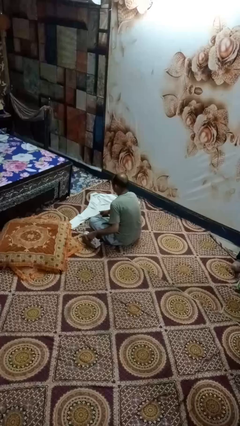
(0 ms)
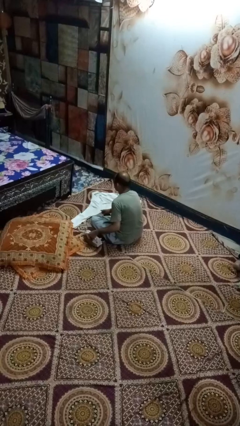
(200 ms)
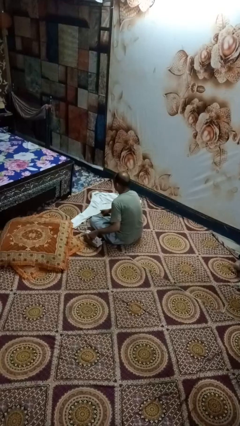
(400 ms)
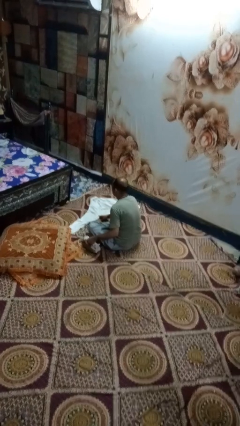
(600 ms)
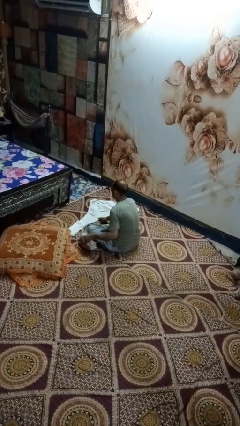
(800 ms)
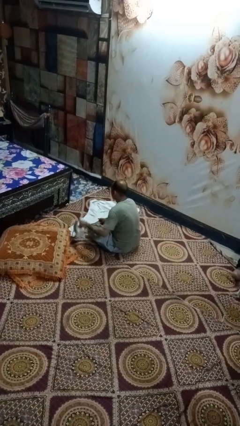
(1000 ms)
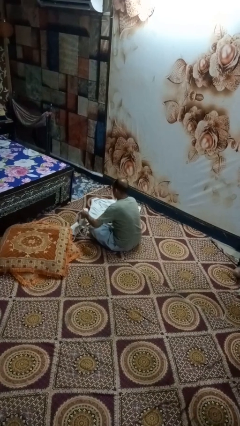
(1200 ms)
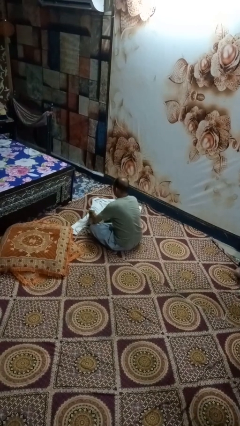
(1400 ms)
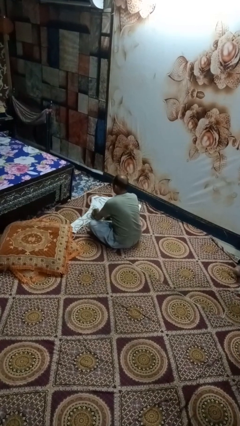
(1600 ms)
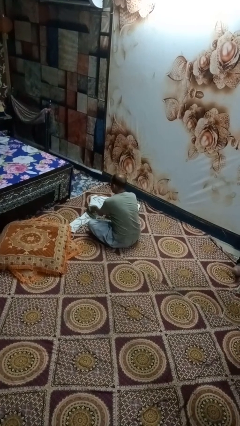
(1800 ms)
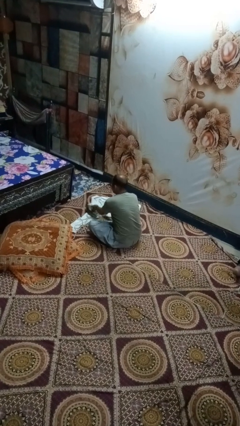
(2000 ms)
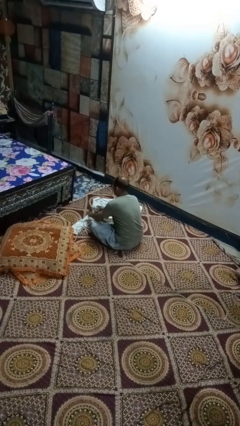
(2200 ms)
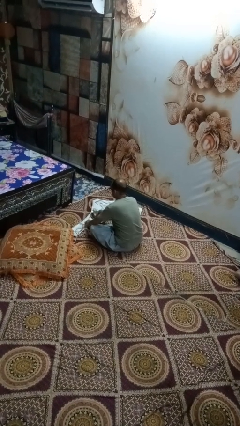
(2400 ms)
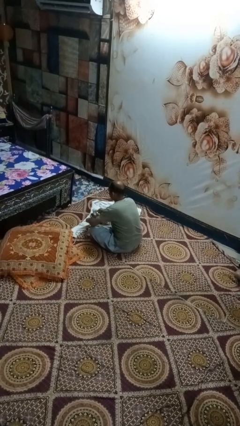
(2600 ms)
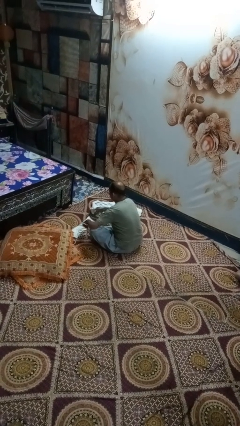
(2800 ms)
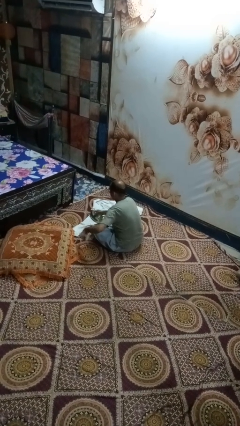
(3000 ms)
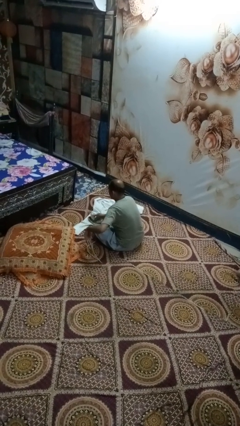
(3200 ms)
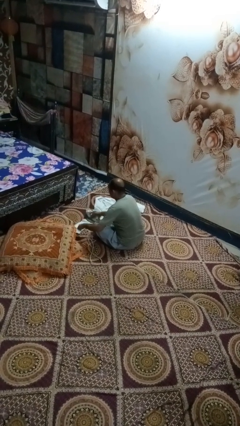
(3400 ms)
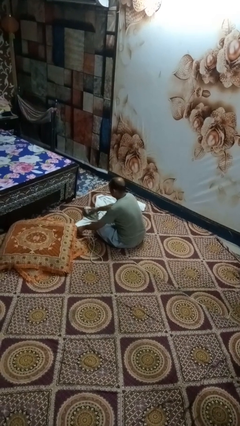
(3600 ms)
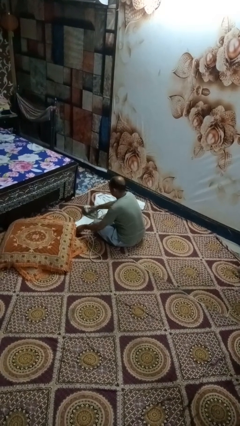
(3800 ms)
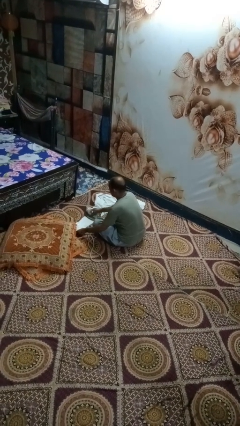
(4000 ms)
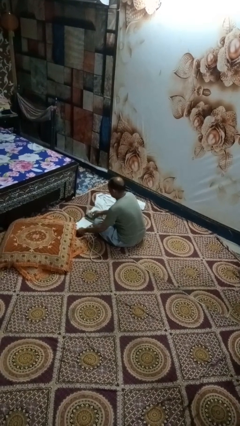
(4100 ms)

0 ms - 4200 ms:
person irons clothes

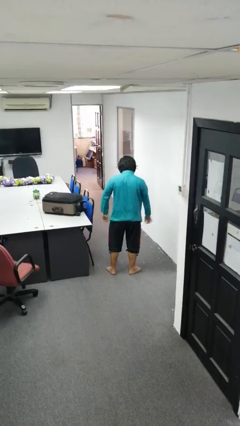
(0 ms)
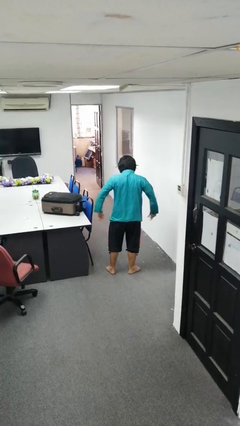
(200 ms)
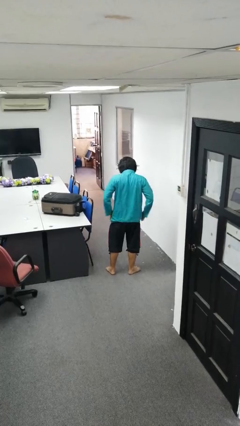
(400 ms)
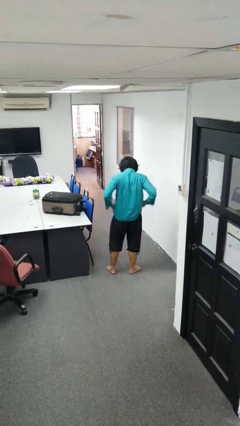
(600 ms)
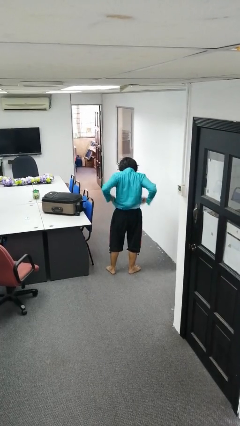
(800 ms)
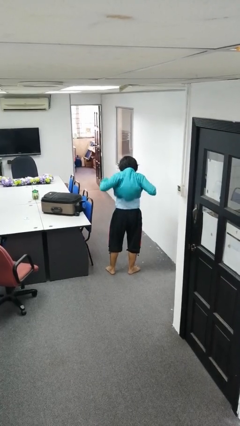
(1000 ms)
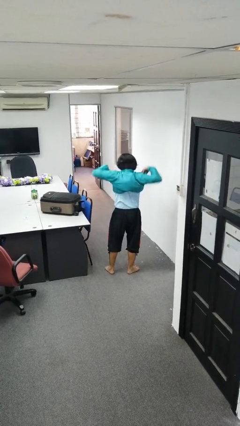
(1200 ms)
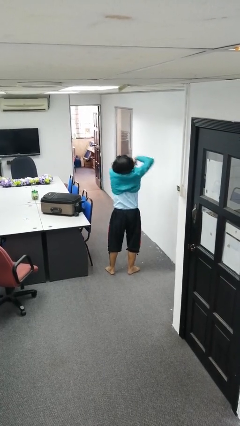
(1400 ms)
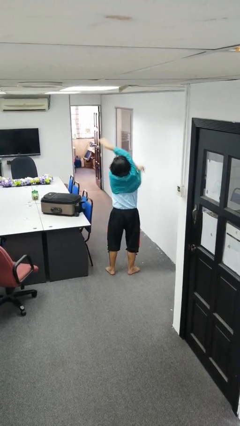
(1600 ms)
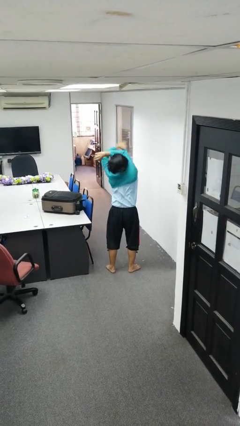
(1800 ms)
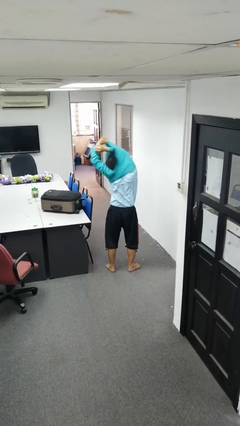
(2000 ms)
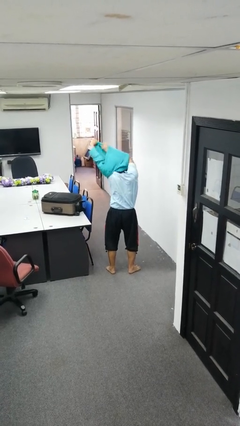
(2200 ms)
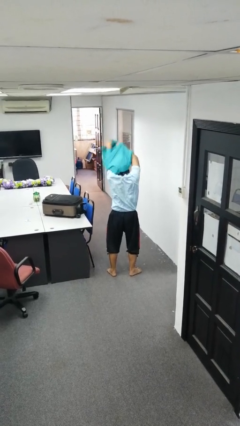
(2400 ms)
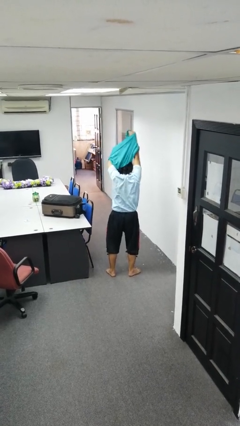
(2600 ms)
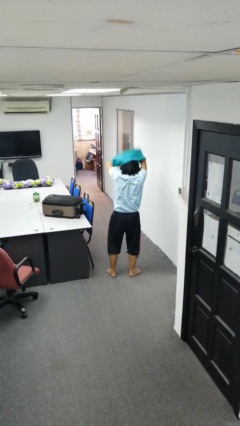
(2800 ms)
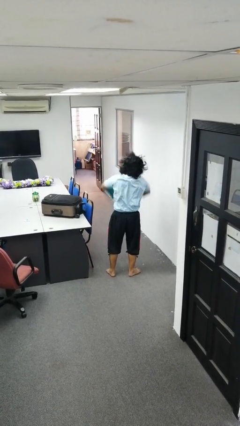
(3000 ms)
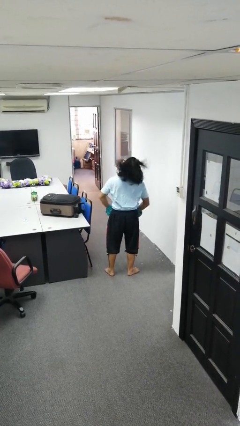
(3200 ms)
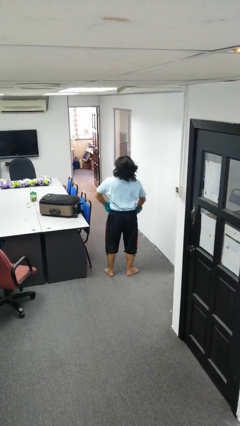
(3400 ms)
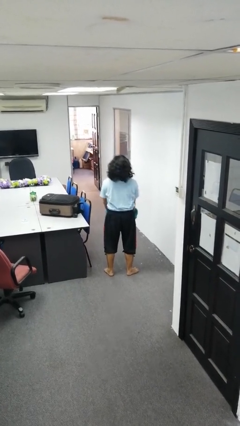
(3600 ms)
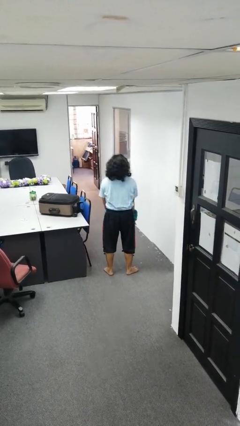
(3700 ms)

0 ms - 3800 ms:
person takes off shirt

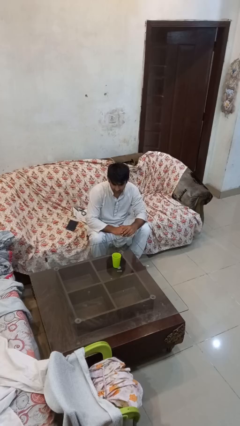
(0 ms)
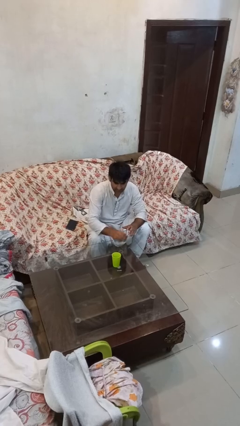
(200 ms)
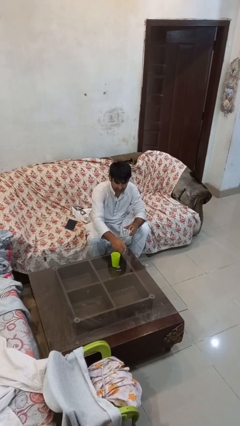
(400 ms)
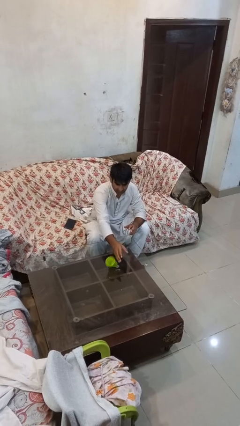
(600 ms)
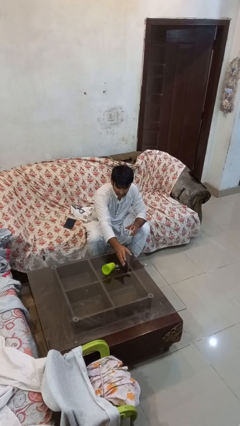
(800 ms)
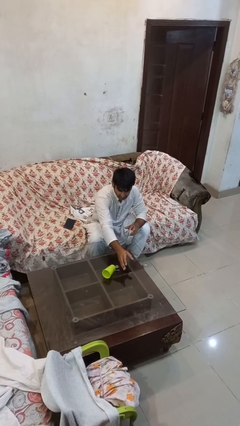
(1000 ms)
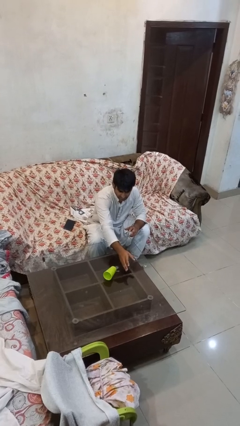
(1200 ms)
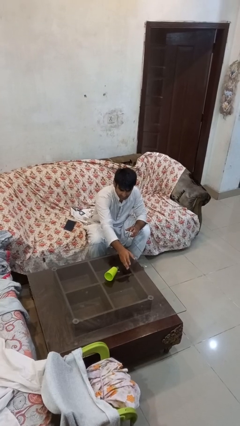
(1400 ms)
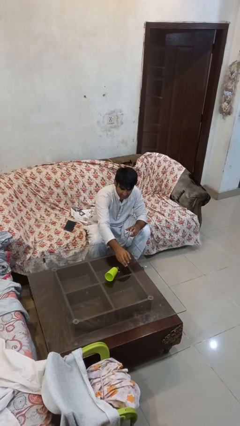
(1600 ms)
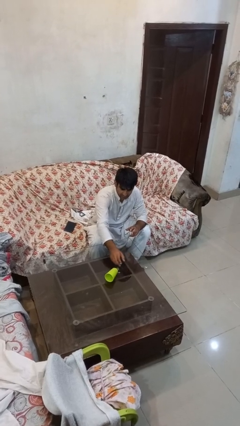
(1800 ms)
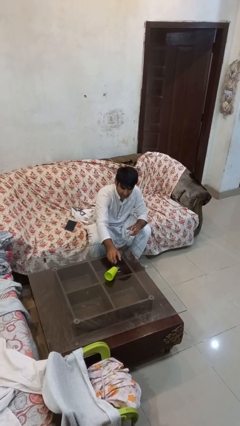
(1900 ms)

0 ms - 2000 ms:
person knocks over glass

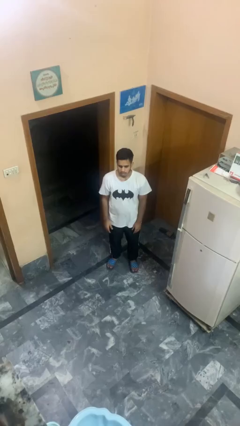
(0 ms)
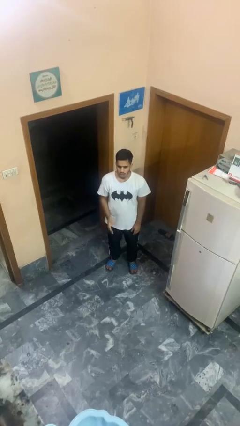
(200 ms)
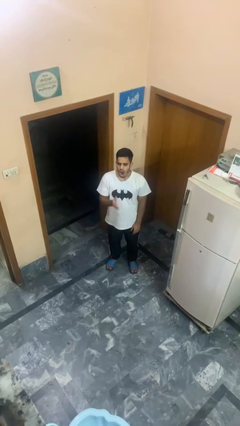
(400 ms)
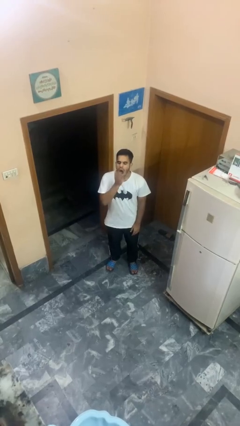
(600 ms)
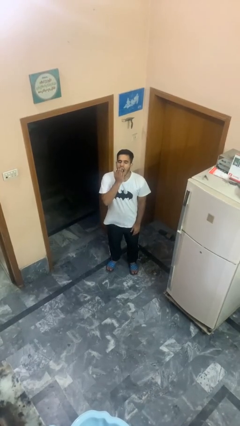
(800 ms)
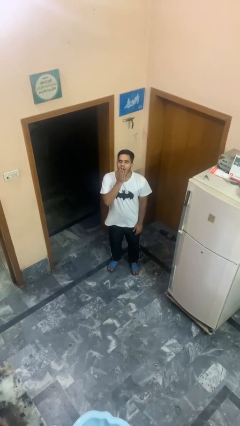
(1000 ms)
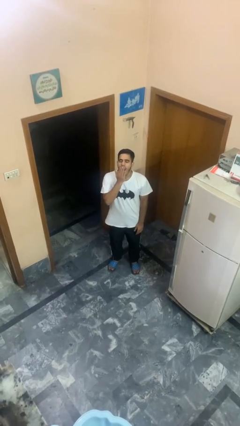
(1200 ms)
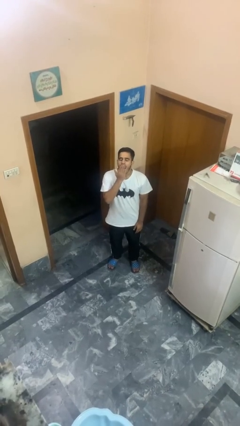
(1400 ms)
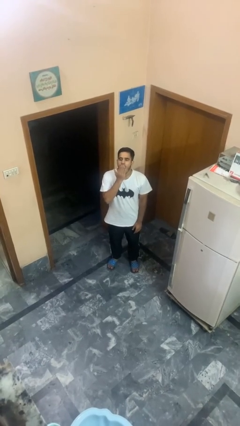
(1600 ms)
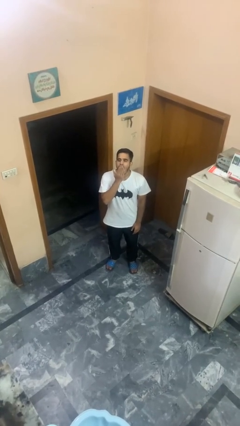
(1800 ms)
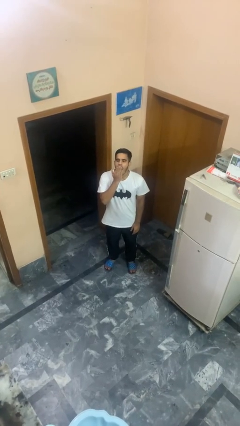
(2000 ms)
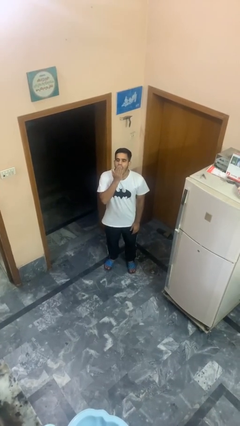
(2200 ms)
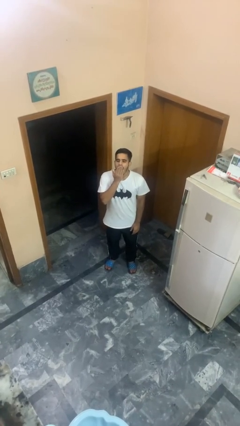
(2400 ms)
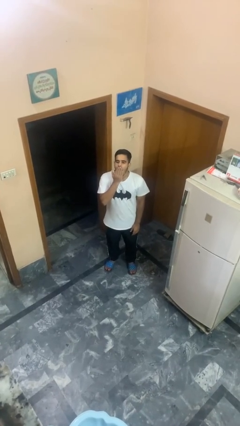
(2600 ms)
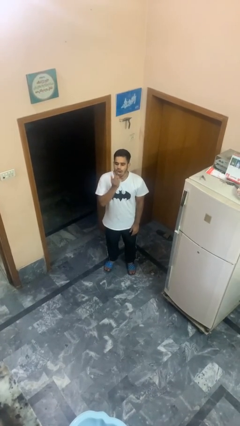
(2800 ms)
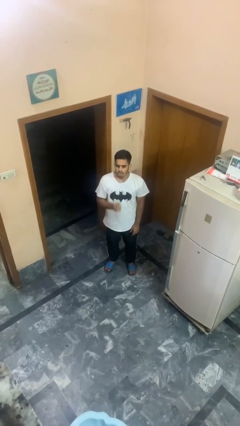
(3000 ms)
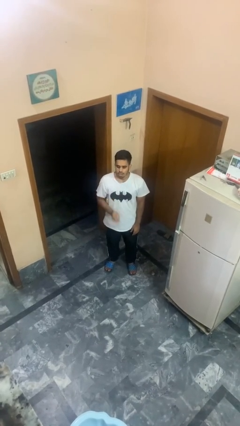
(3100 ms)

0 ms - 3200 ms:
person yawns

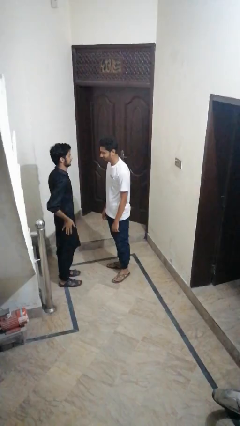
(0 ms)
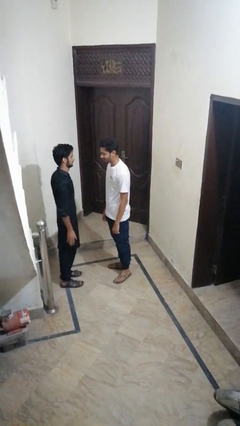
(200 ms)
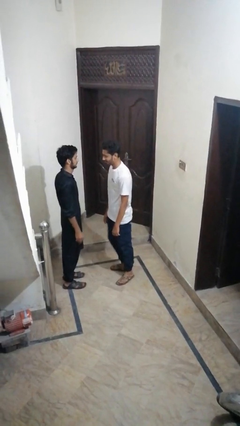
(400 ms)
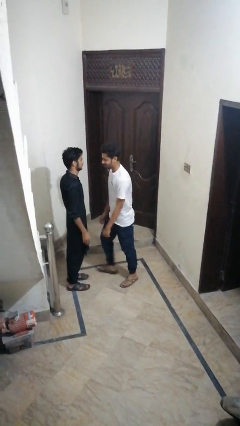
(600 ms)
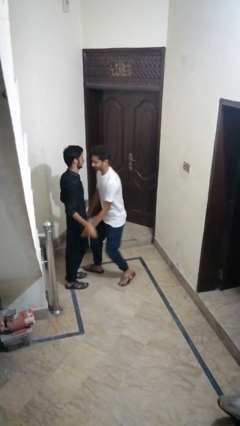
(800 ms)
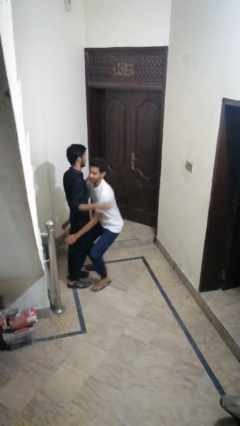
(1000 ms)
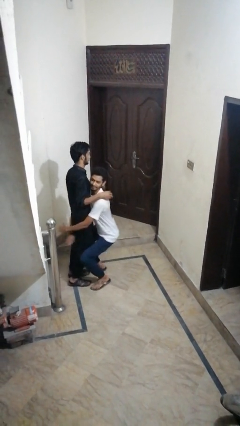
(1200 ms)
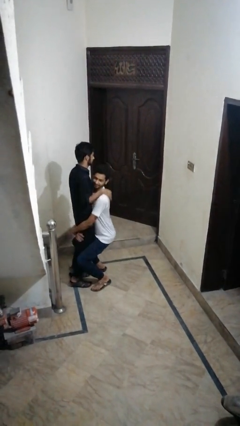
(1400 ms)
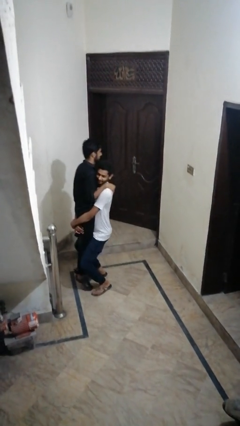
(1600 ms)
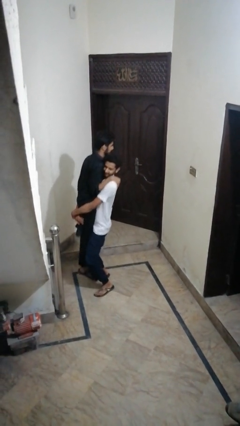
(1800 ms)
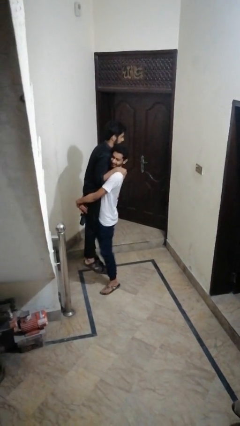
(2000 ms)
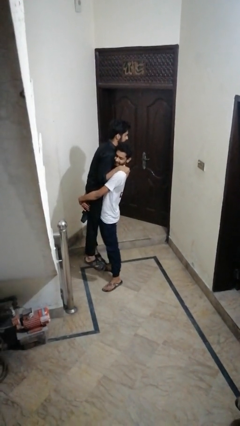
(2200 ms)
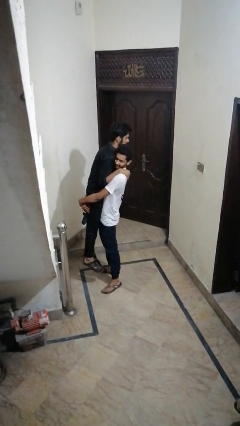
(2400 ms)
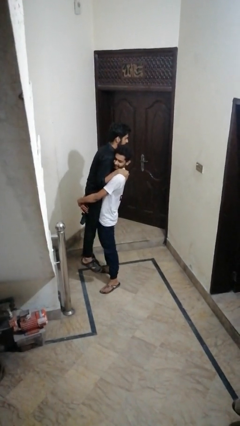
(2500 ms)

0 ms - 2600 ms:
person puts on facemask

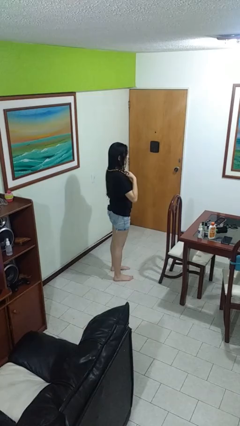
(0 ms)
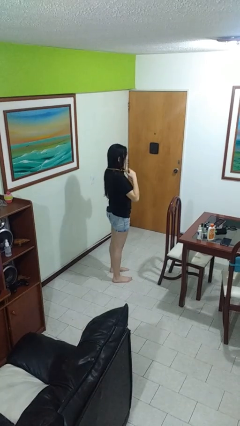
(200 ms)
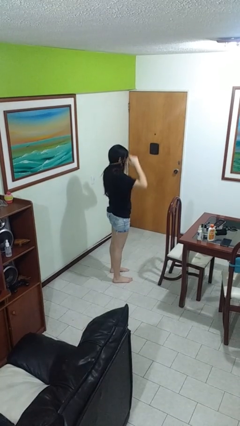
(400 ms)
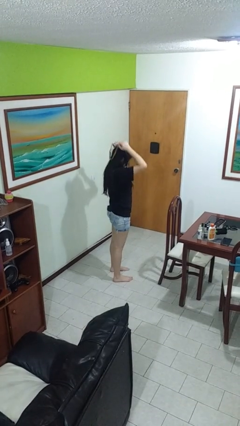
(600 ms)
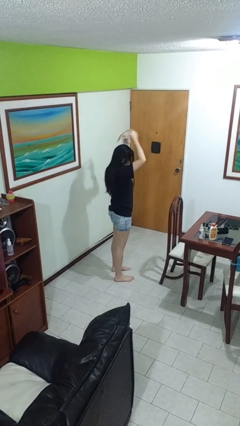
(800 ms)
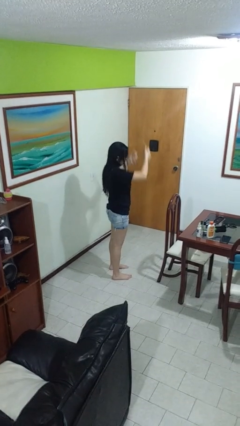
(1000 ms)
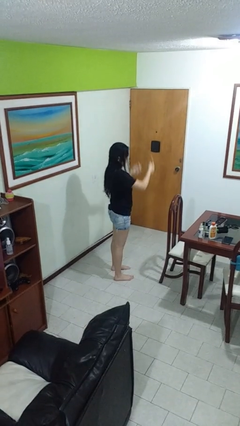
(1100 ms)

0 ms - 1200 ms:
person takes off necklace

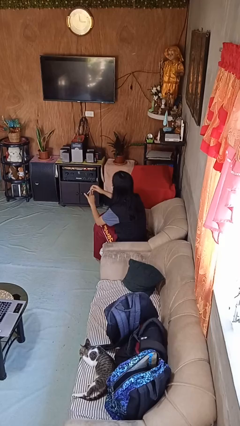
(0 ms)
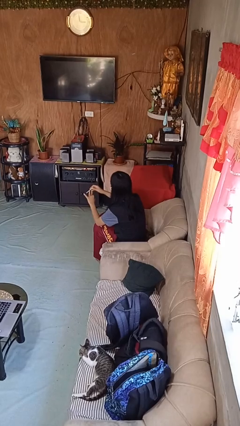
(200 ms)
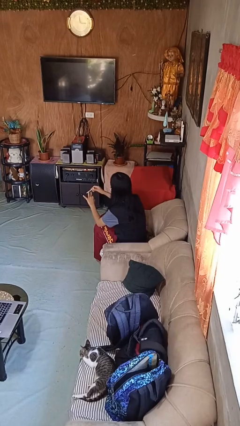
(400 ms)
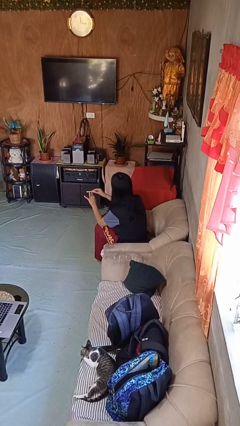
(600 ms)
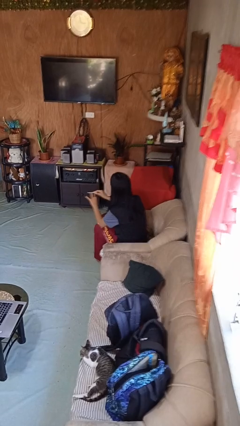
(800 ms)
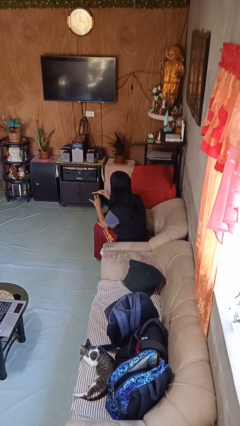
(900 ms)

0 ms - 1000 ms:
person files fingernails
